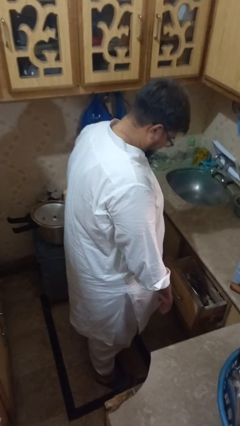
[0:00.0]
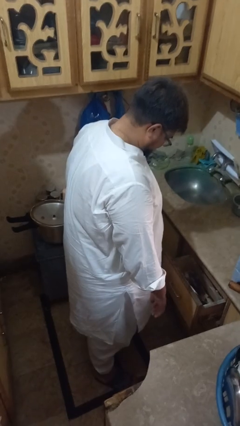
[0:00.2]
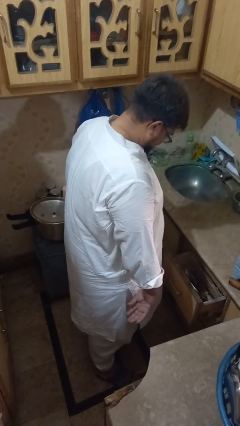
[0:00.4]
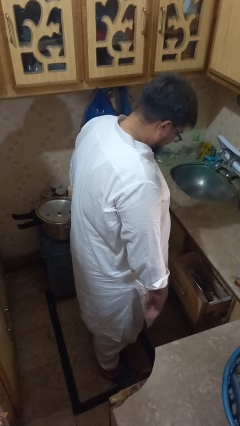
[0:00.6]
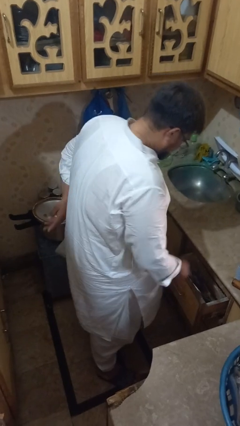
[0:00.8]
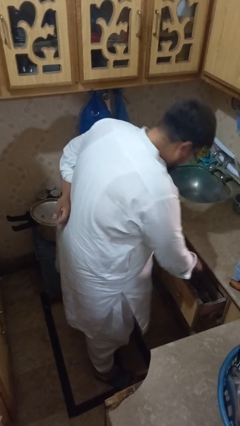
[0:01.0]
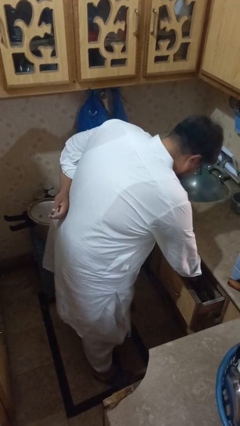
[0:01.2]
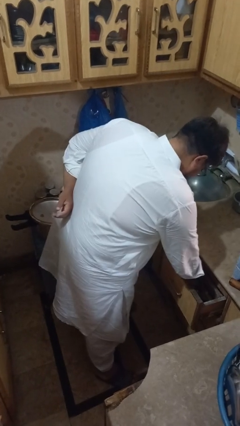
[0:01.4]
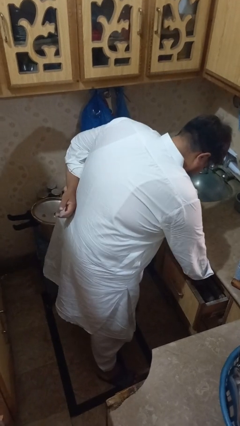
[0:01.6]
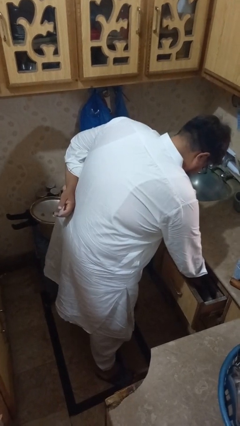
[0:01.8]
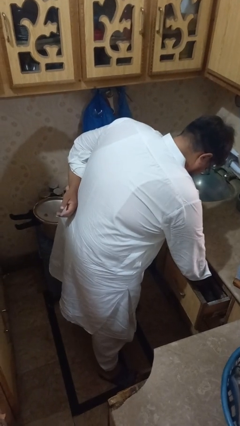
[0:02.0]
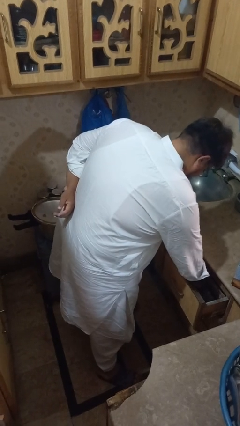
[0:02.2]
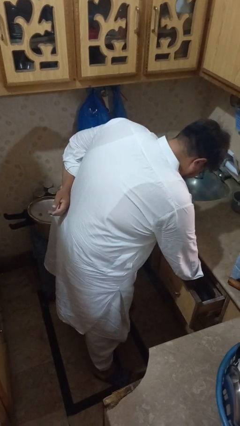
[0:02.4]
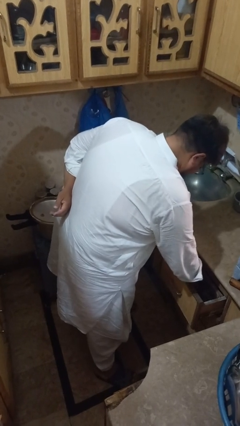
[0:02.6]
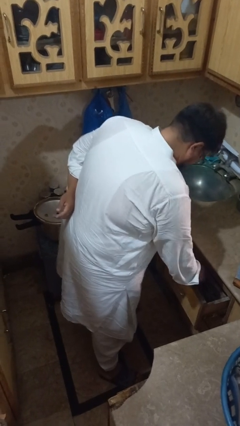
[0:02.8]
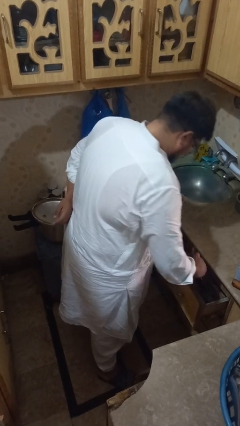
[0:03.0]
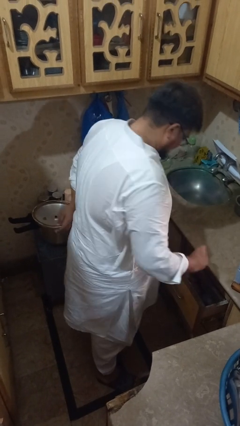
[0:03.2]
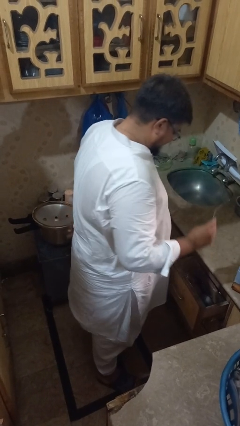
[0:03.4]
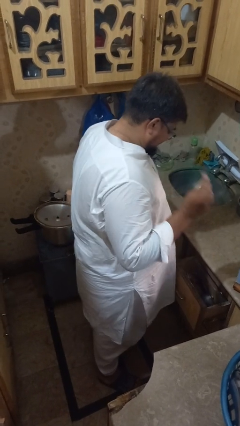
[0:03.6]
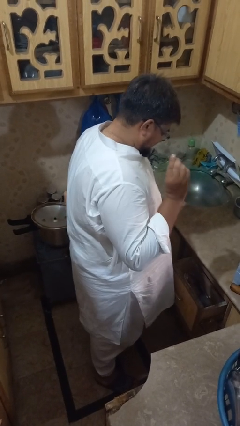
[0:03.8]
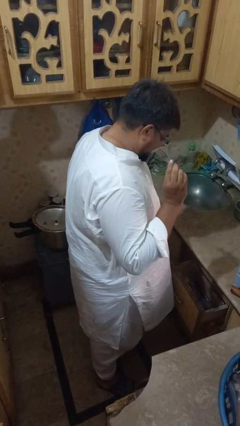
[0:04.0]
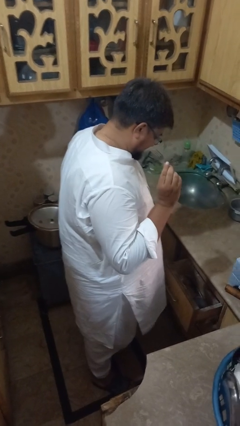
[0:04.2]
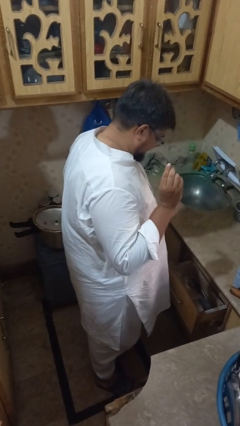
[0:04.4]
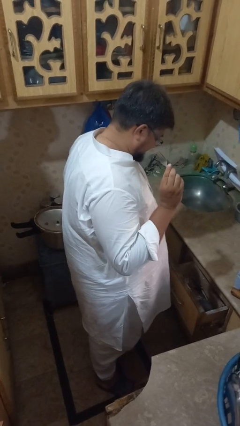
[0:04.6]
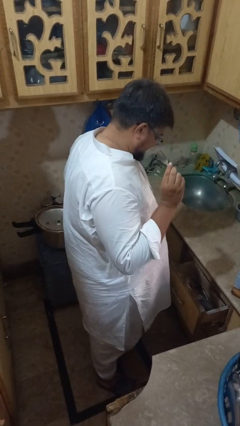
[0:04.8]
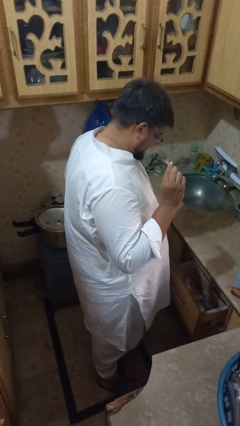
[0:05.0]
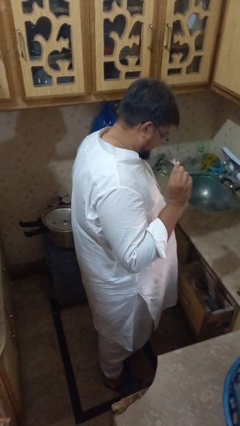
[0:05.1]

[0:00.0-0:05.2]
person searches in kitchen drawer

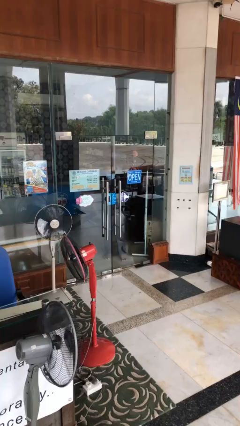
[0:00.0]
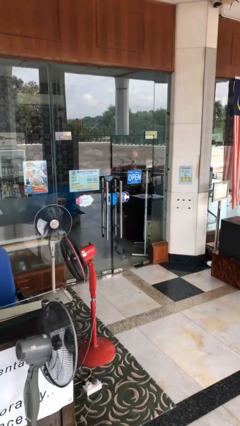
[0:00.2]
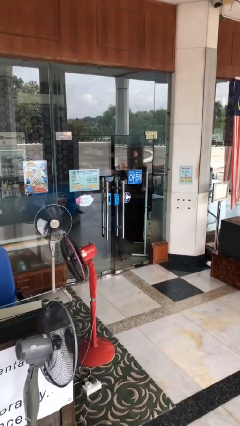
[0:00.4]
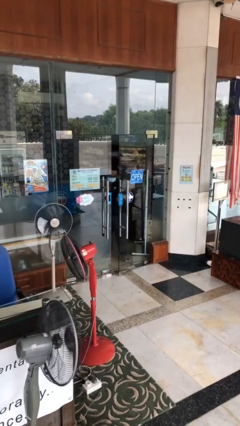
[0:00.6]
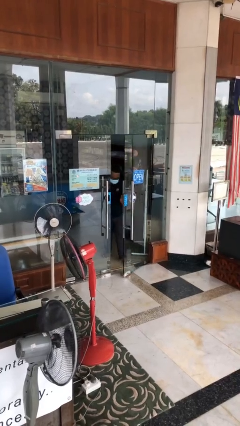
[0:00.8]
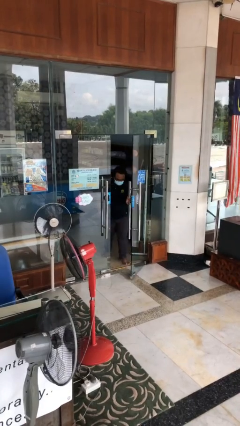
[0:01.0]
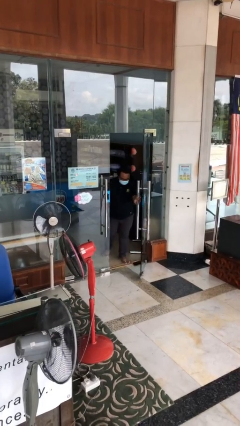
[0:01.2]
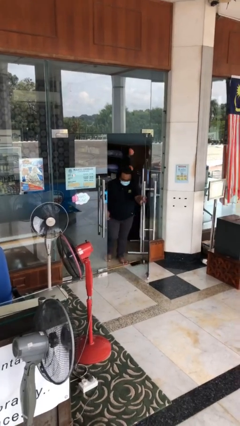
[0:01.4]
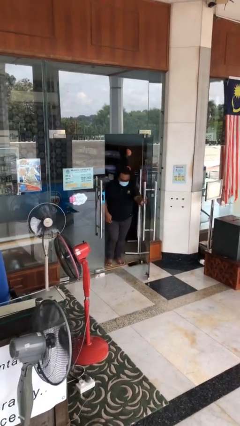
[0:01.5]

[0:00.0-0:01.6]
person opens facility door

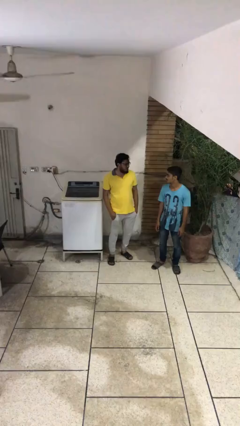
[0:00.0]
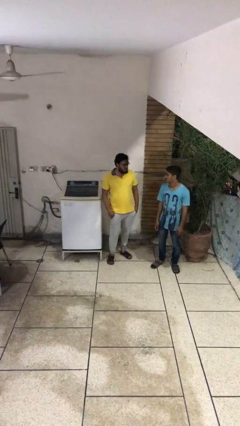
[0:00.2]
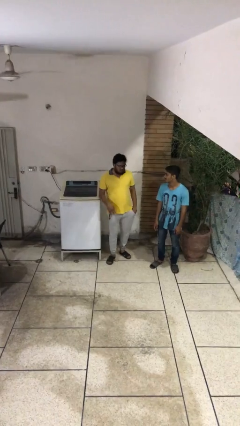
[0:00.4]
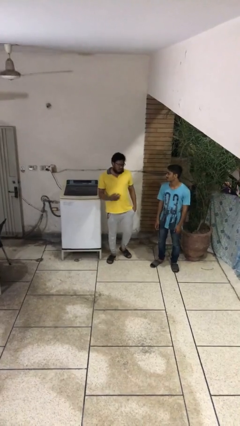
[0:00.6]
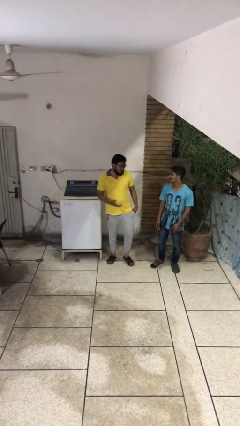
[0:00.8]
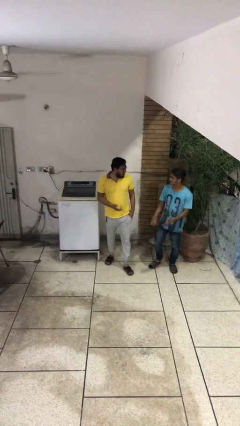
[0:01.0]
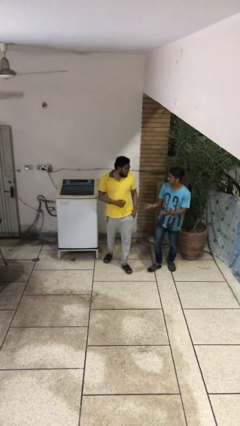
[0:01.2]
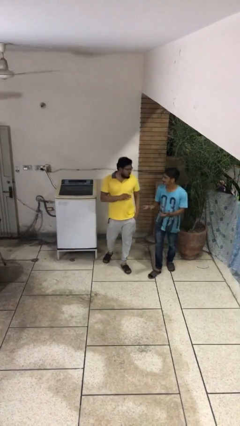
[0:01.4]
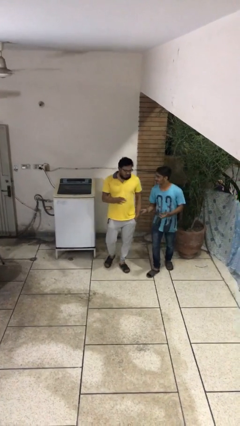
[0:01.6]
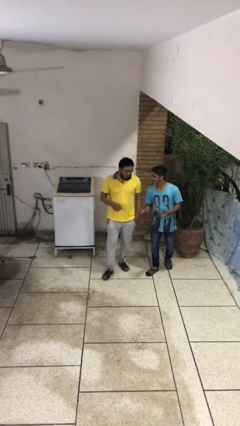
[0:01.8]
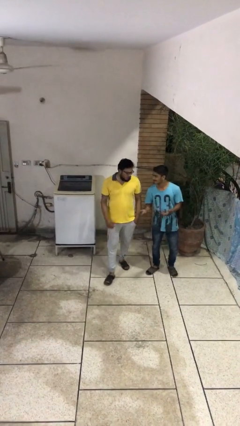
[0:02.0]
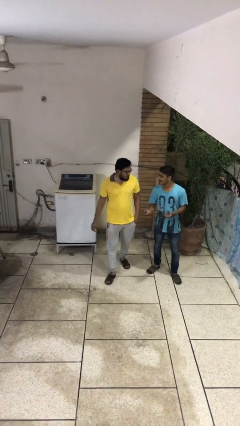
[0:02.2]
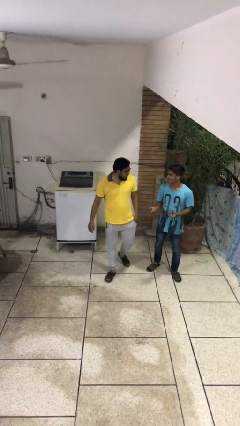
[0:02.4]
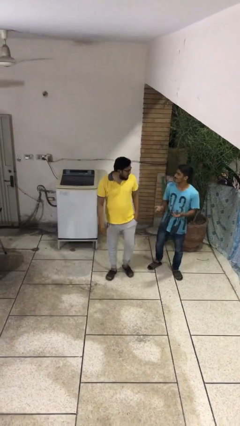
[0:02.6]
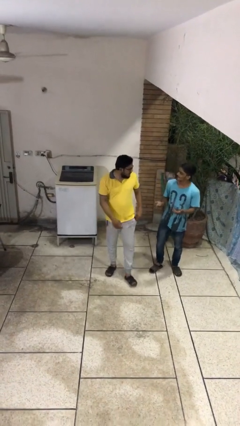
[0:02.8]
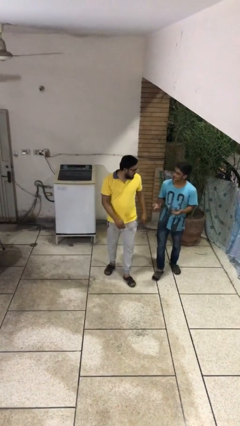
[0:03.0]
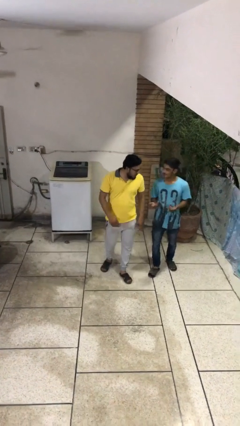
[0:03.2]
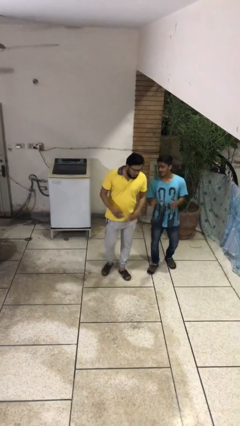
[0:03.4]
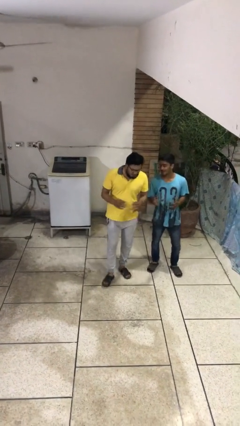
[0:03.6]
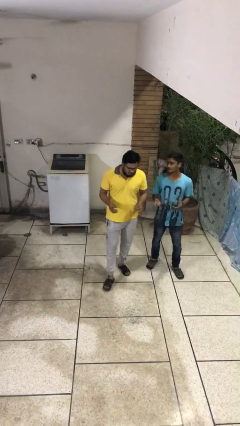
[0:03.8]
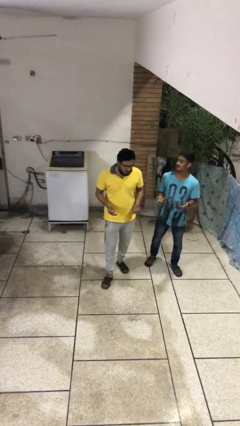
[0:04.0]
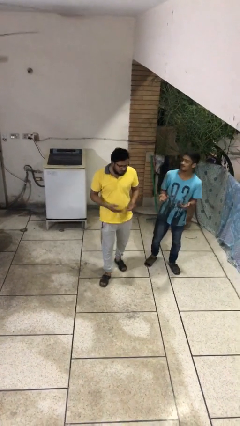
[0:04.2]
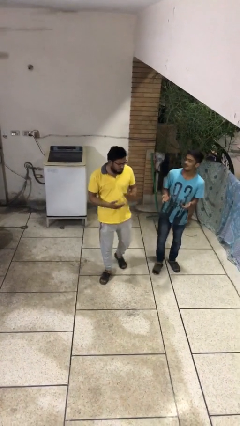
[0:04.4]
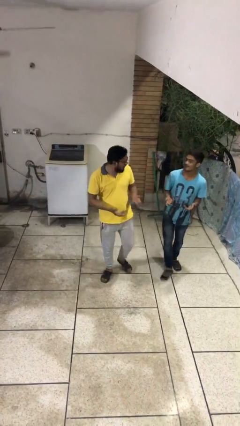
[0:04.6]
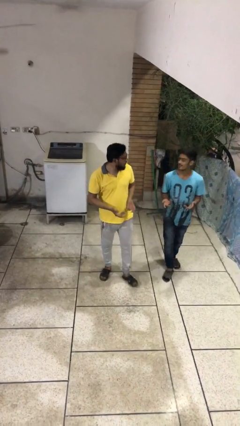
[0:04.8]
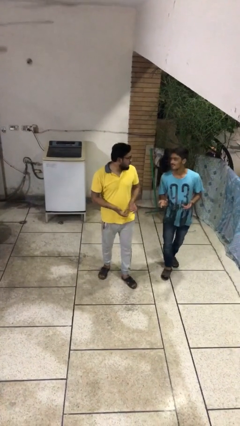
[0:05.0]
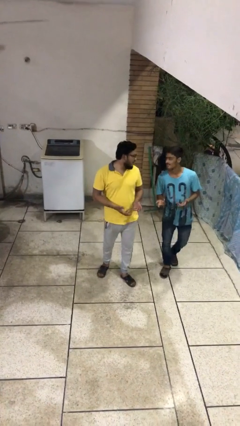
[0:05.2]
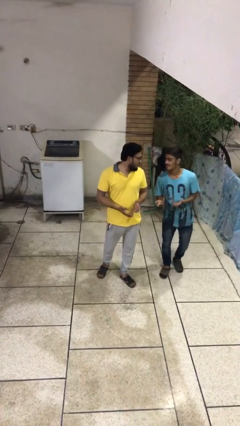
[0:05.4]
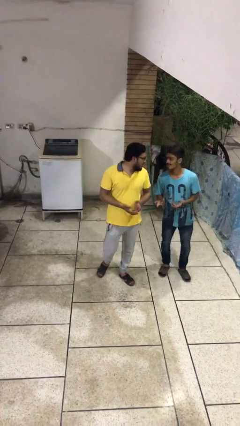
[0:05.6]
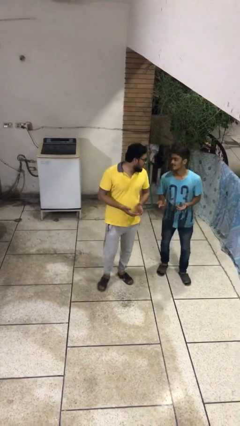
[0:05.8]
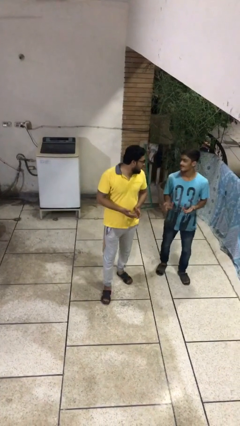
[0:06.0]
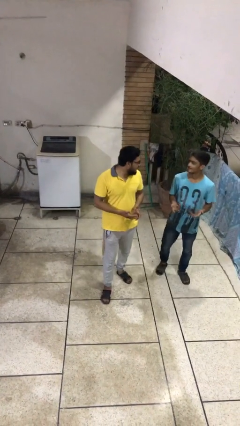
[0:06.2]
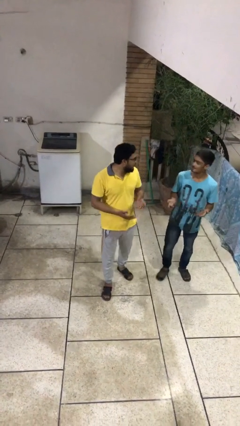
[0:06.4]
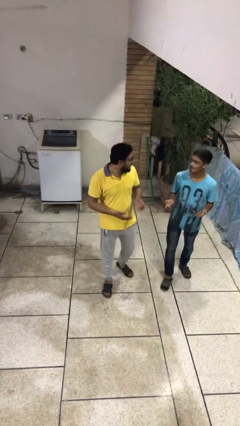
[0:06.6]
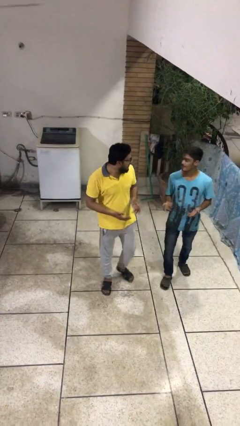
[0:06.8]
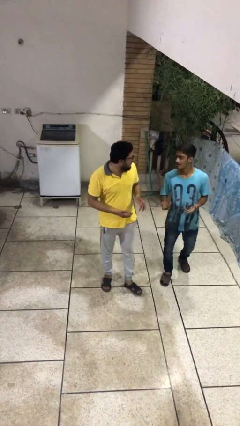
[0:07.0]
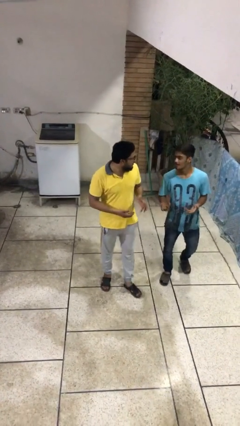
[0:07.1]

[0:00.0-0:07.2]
person talks to person

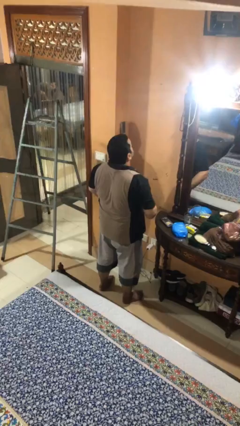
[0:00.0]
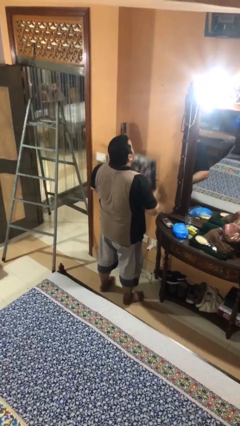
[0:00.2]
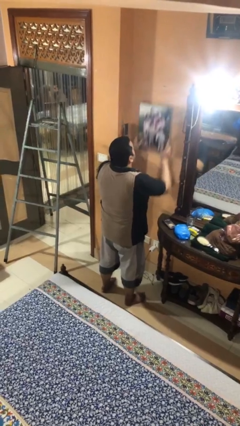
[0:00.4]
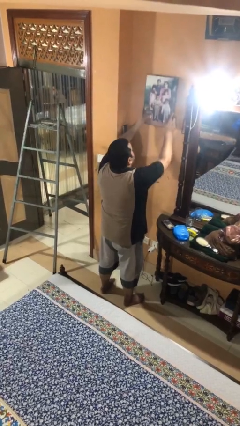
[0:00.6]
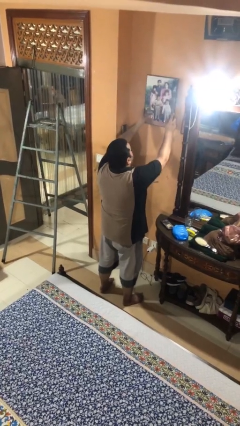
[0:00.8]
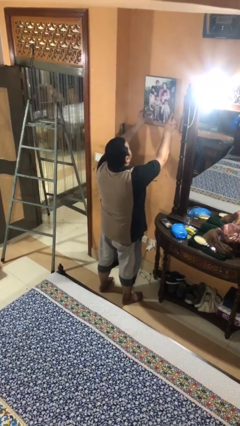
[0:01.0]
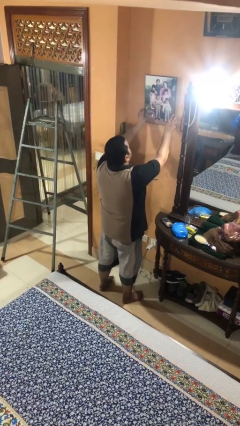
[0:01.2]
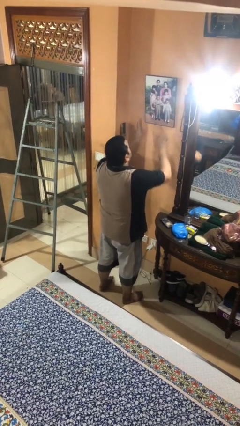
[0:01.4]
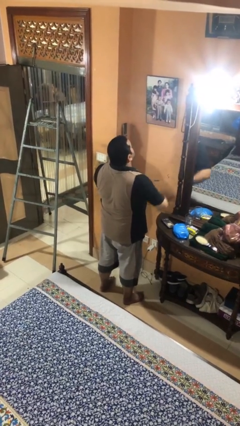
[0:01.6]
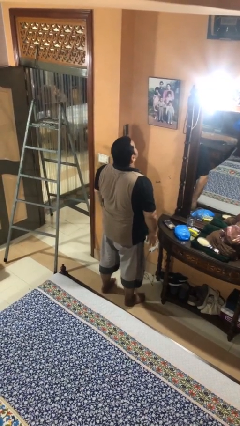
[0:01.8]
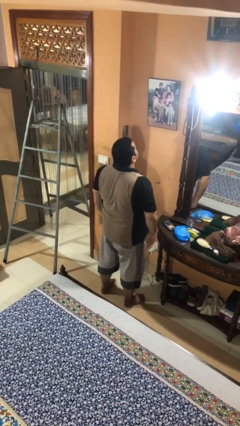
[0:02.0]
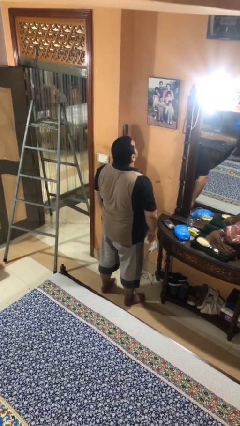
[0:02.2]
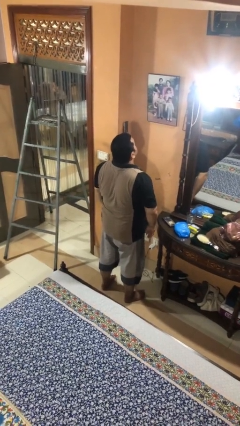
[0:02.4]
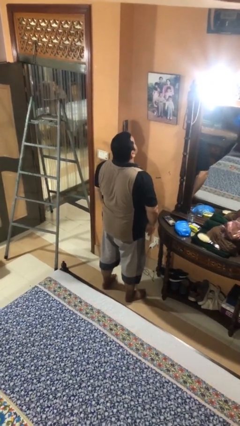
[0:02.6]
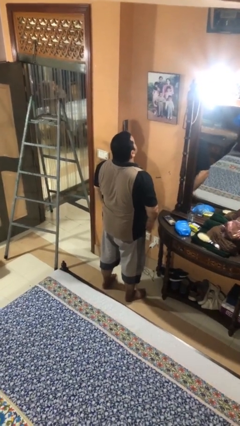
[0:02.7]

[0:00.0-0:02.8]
person puts up picture frame

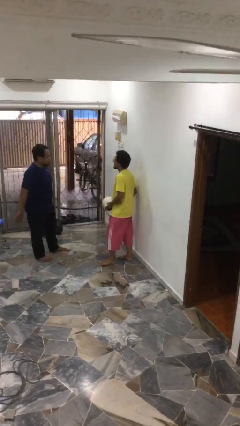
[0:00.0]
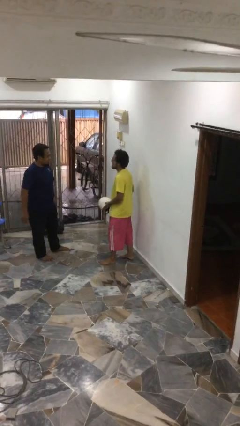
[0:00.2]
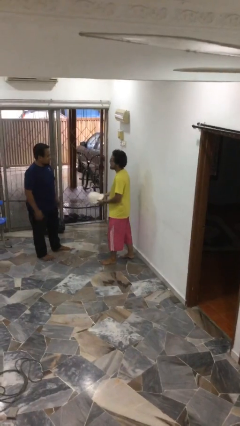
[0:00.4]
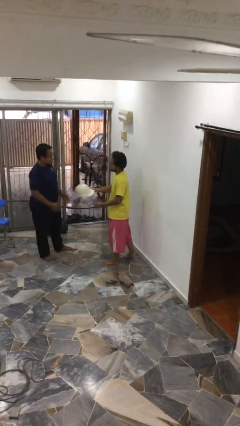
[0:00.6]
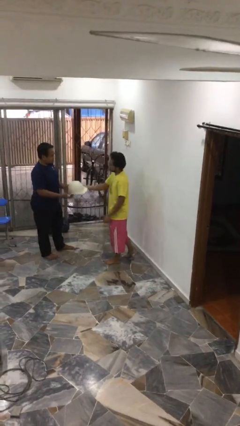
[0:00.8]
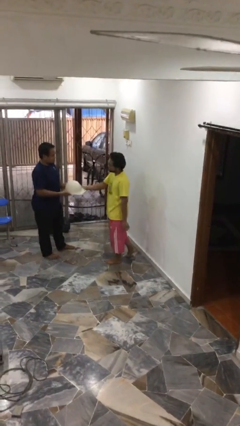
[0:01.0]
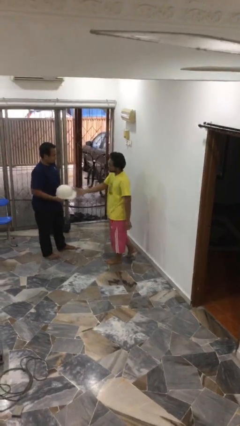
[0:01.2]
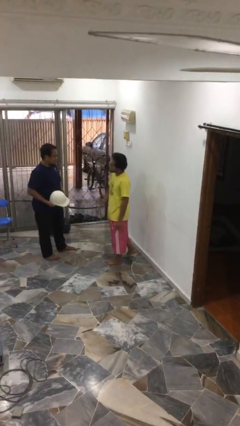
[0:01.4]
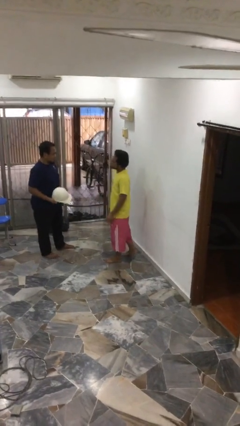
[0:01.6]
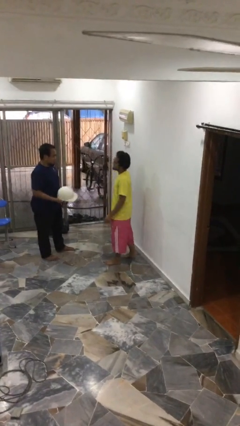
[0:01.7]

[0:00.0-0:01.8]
person transfers object to person
